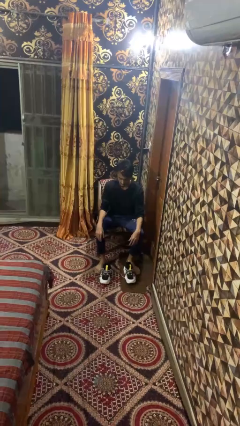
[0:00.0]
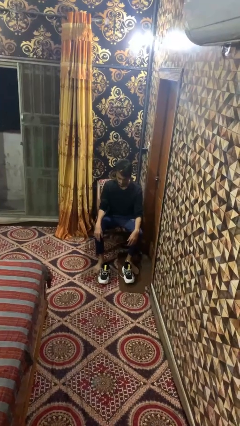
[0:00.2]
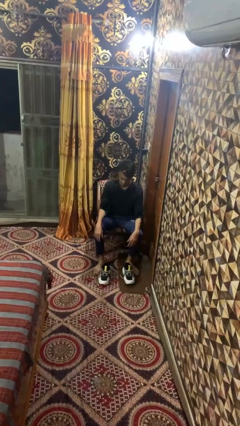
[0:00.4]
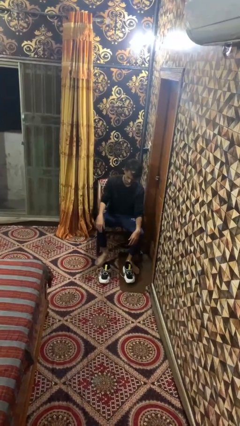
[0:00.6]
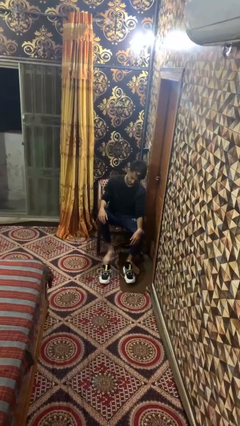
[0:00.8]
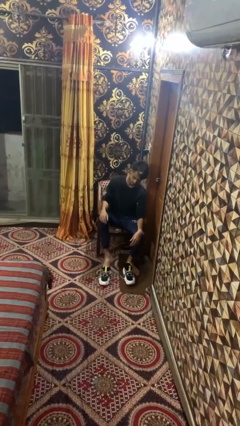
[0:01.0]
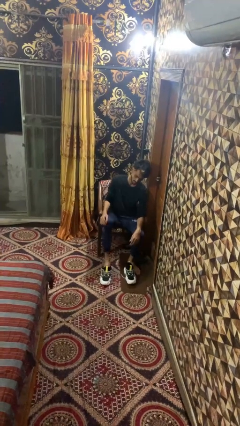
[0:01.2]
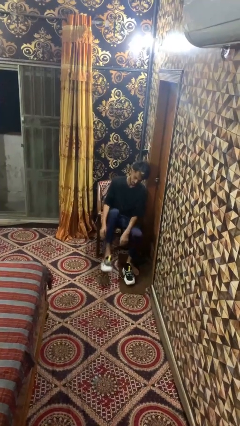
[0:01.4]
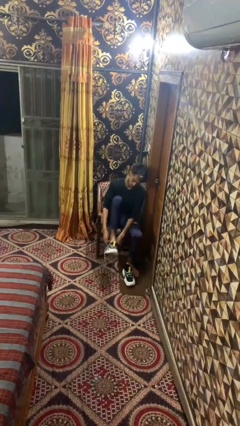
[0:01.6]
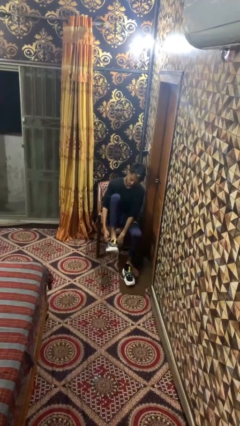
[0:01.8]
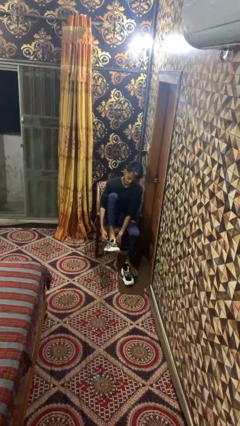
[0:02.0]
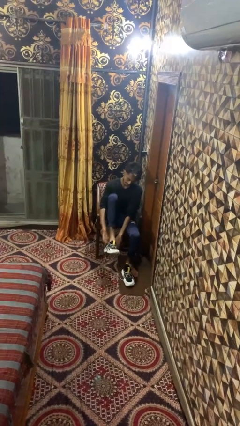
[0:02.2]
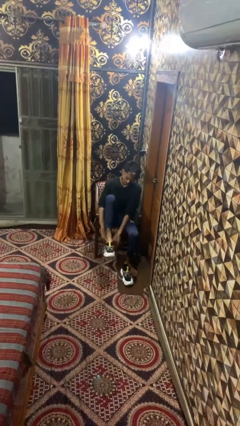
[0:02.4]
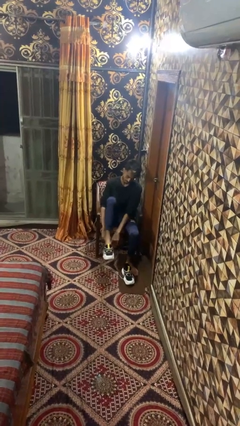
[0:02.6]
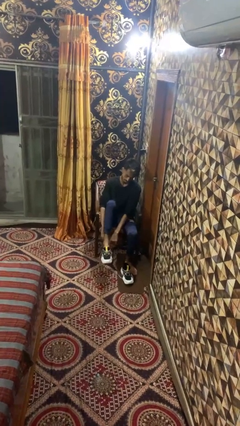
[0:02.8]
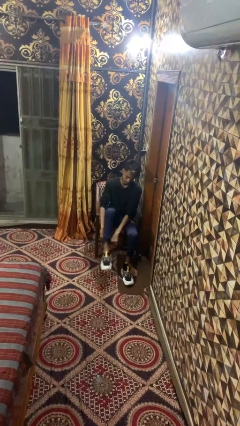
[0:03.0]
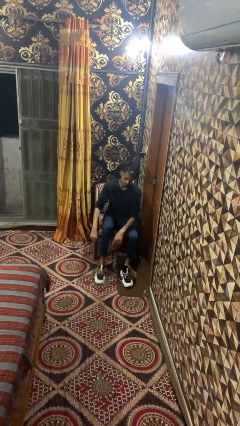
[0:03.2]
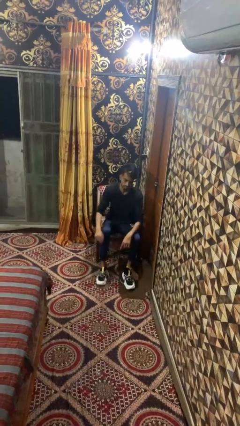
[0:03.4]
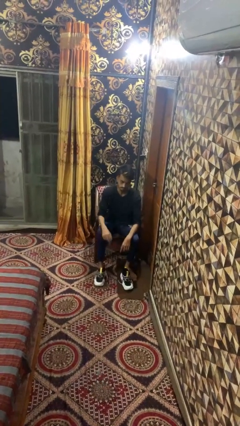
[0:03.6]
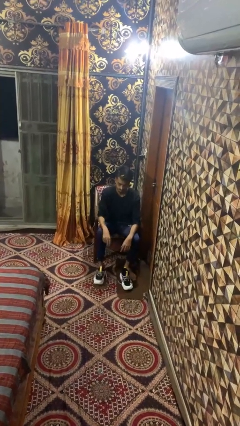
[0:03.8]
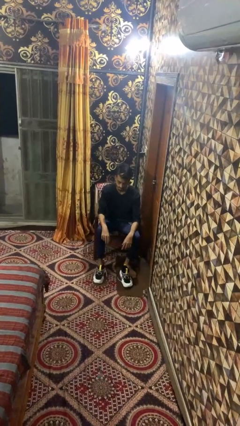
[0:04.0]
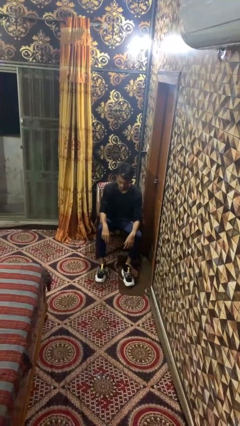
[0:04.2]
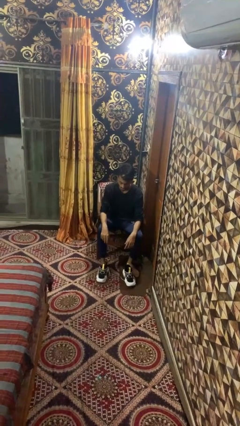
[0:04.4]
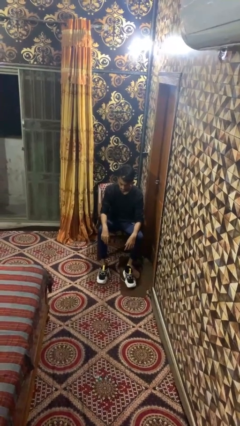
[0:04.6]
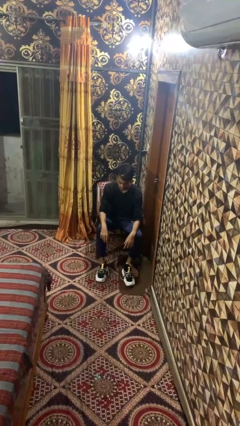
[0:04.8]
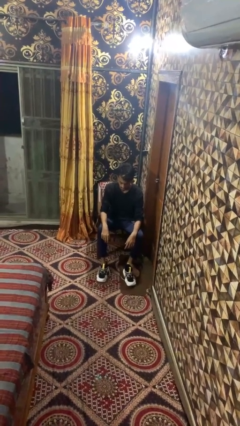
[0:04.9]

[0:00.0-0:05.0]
person puts on shoes

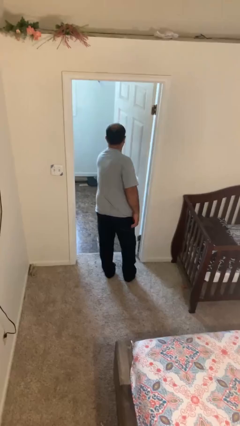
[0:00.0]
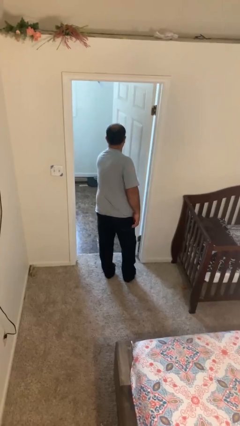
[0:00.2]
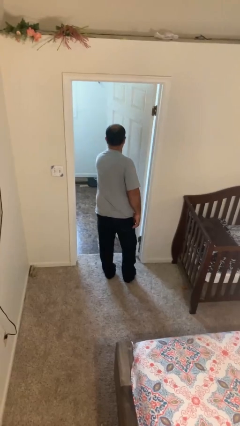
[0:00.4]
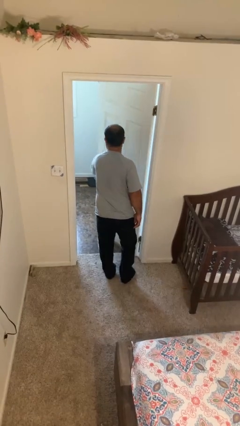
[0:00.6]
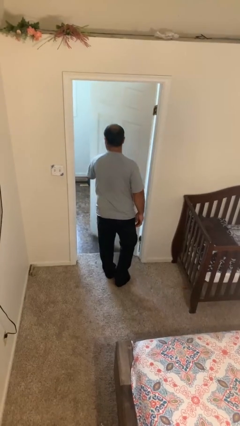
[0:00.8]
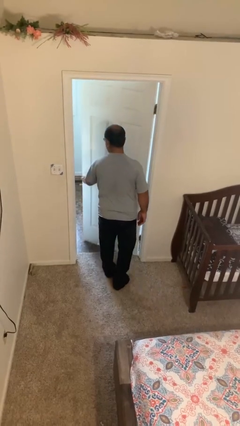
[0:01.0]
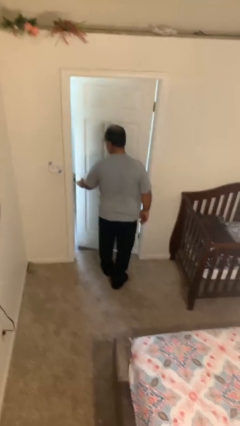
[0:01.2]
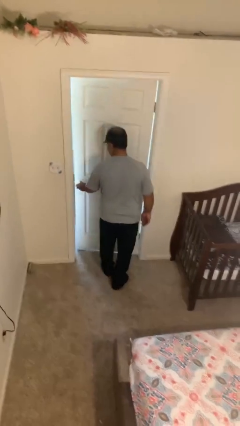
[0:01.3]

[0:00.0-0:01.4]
person closes facility door

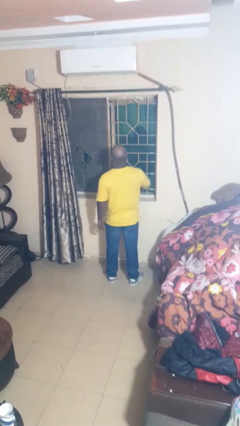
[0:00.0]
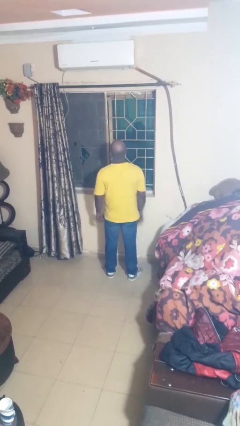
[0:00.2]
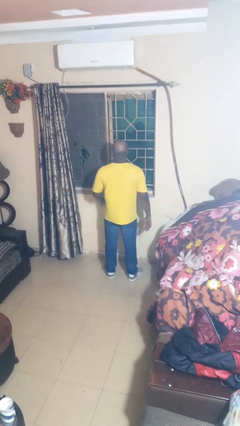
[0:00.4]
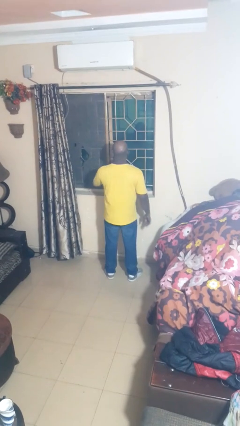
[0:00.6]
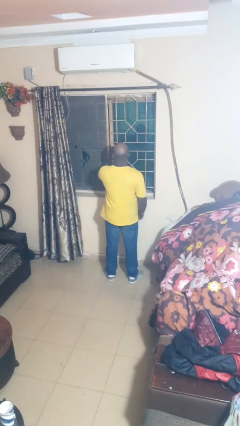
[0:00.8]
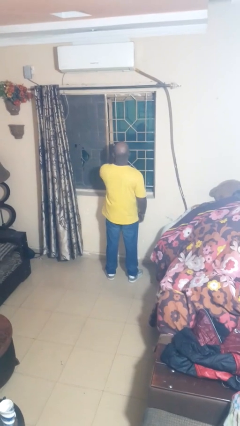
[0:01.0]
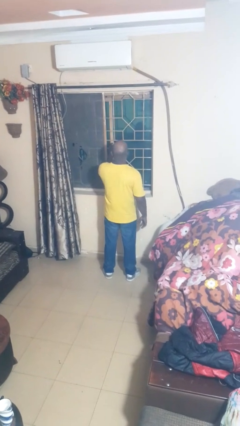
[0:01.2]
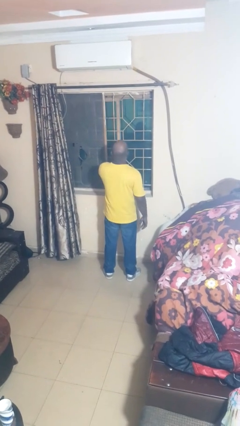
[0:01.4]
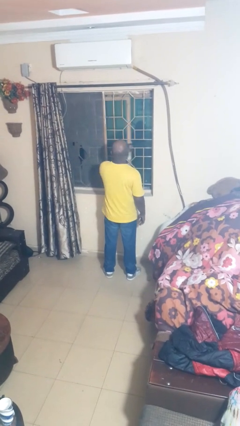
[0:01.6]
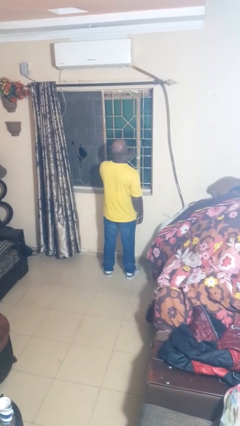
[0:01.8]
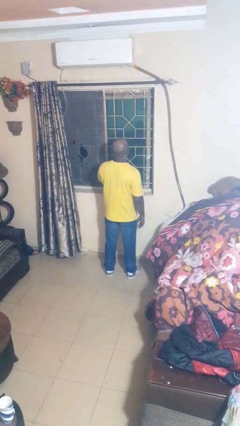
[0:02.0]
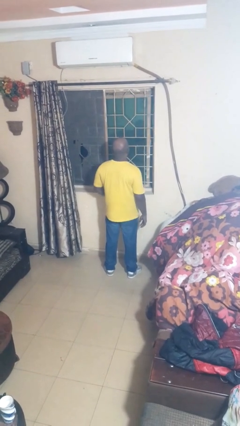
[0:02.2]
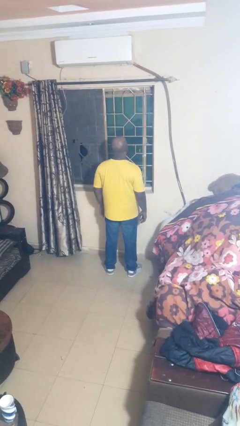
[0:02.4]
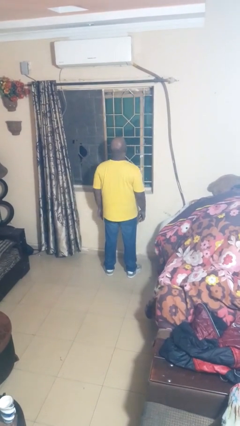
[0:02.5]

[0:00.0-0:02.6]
person closes home window

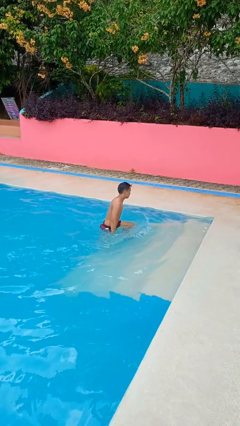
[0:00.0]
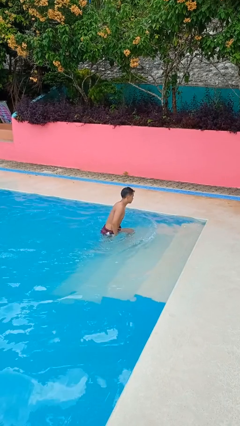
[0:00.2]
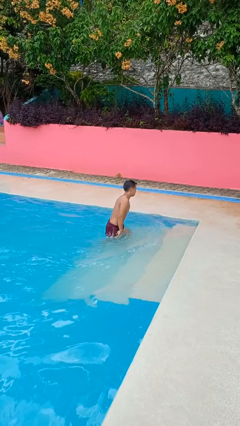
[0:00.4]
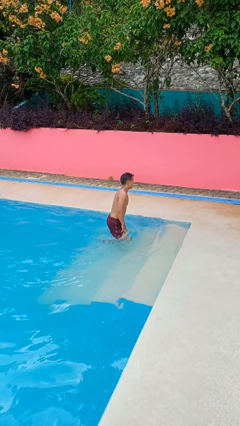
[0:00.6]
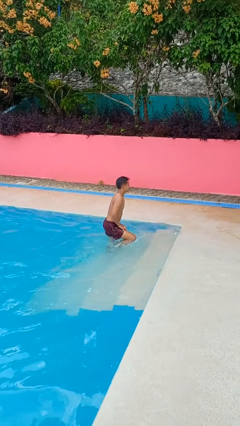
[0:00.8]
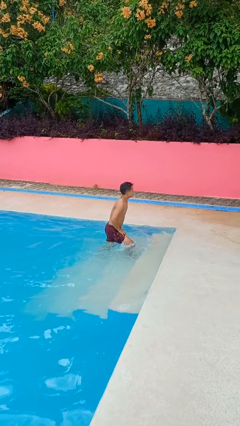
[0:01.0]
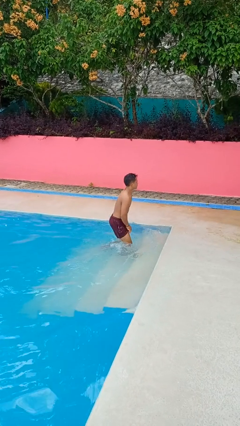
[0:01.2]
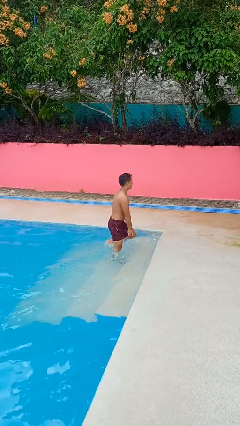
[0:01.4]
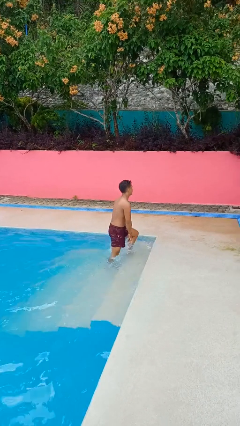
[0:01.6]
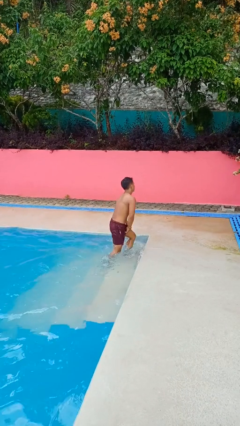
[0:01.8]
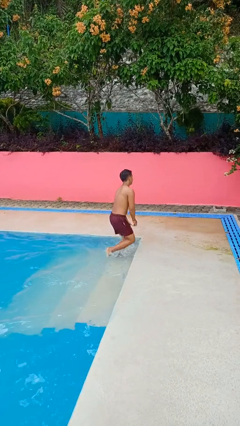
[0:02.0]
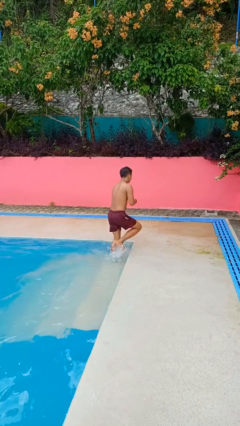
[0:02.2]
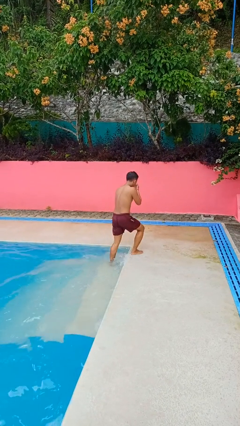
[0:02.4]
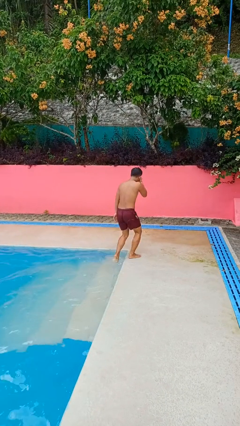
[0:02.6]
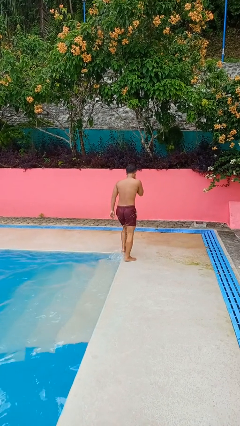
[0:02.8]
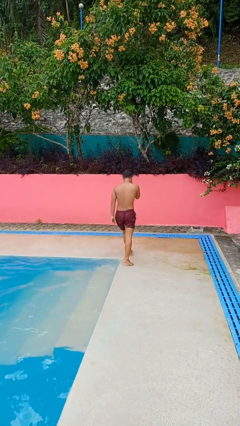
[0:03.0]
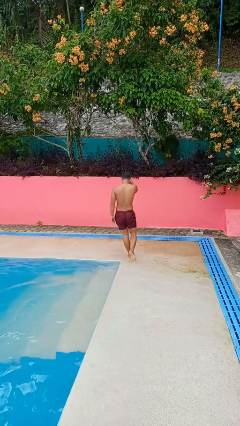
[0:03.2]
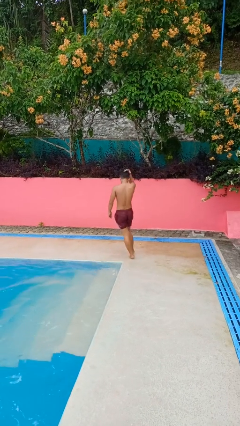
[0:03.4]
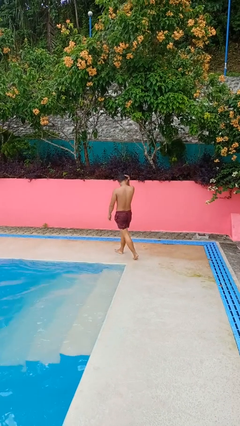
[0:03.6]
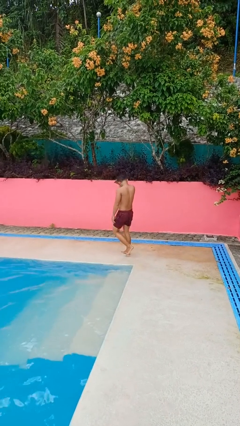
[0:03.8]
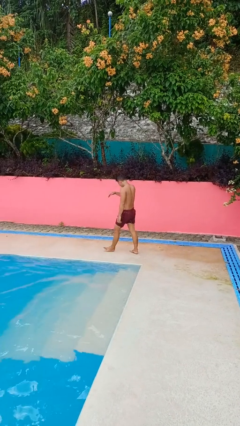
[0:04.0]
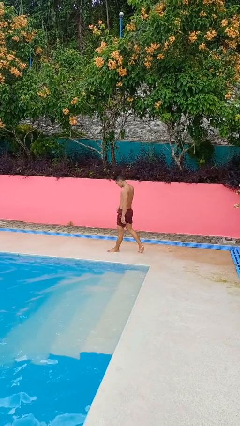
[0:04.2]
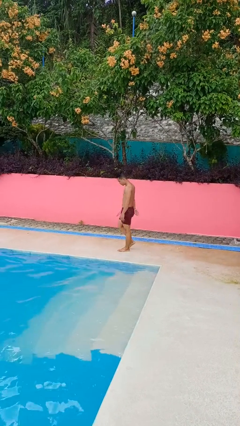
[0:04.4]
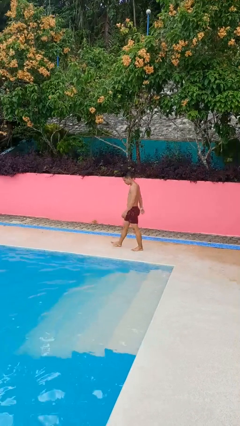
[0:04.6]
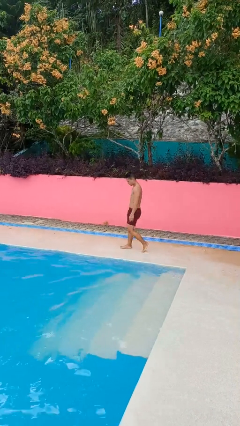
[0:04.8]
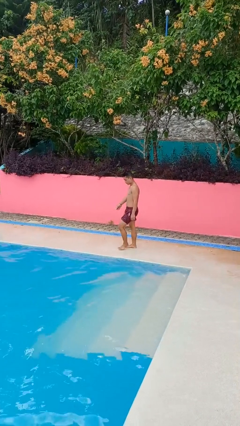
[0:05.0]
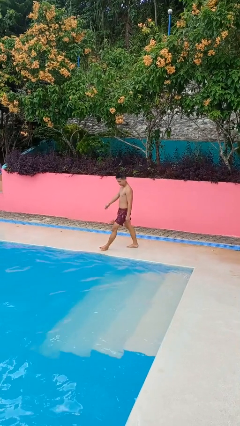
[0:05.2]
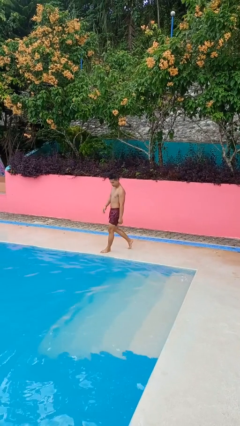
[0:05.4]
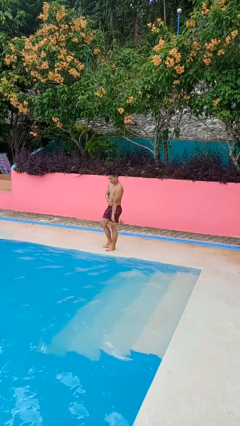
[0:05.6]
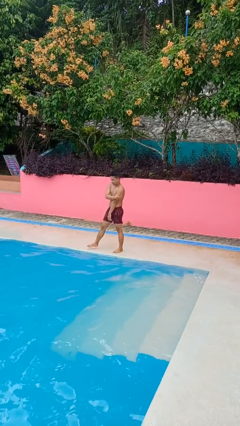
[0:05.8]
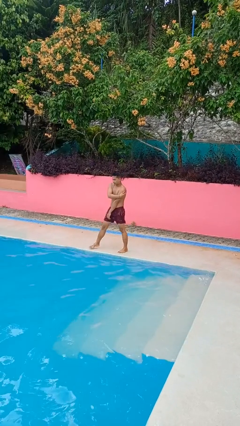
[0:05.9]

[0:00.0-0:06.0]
person exits pool

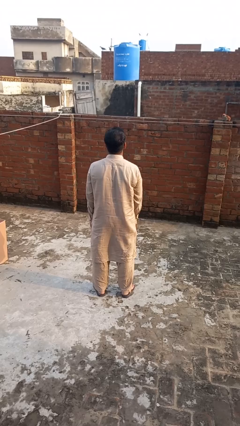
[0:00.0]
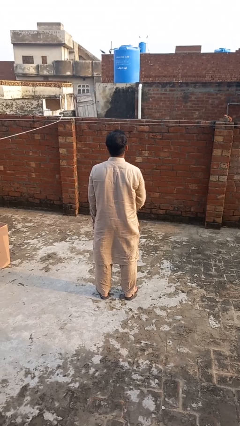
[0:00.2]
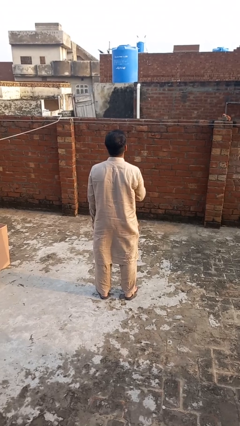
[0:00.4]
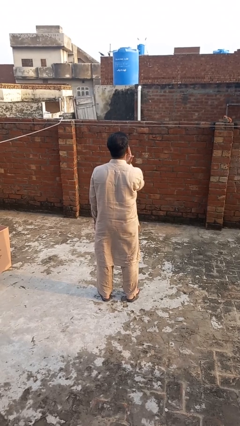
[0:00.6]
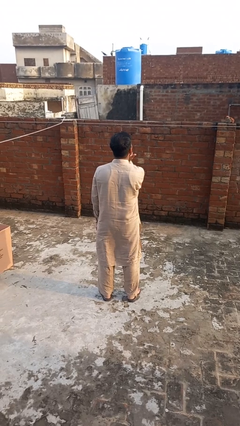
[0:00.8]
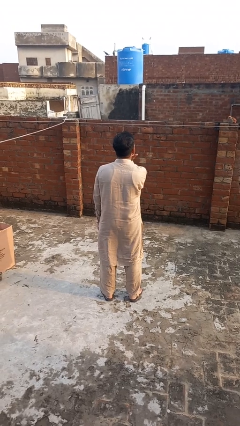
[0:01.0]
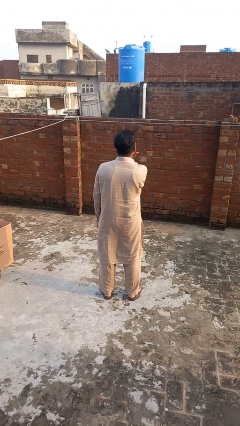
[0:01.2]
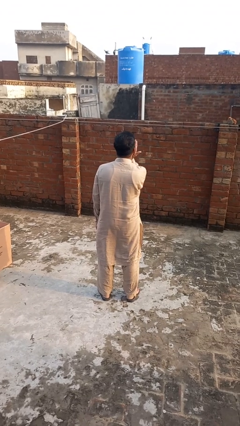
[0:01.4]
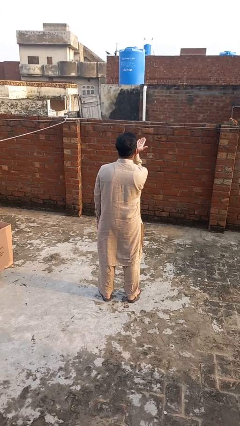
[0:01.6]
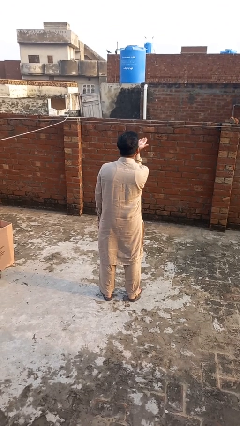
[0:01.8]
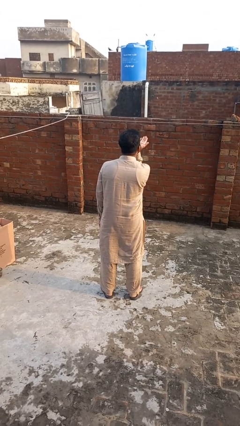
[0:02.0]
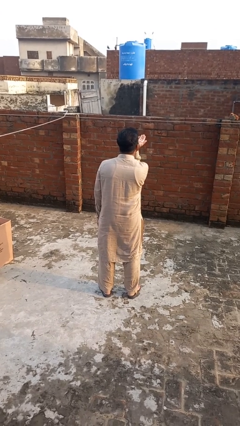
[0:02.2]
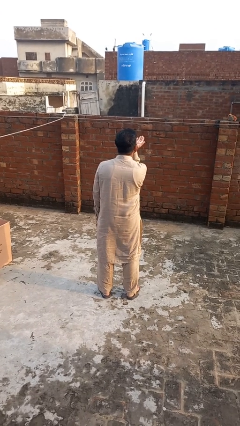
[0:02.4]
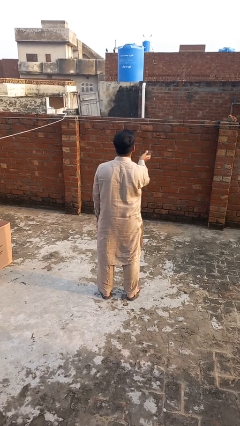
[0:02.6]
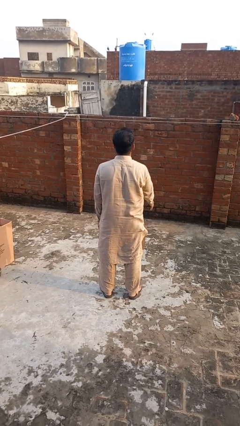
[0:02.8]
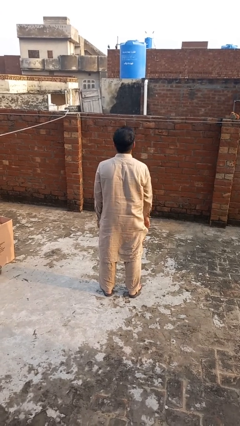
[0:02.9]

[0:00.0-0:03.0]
person gestures blow kiss
